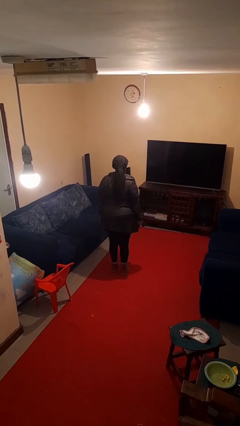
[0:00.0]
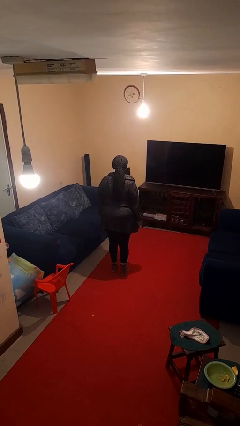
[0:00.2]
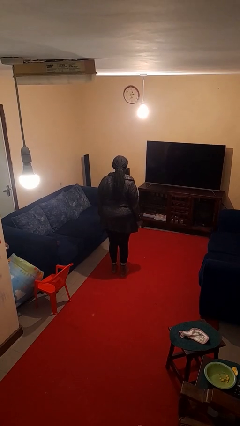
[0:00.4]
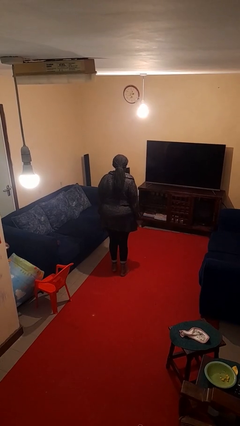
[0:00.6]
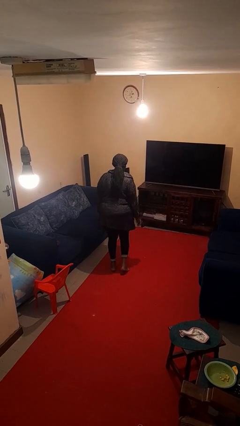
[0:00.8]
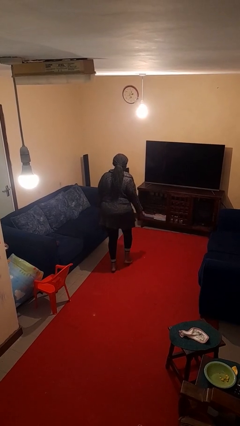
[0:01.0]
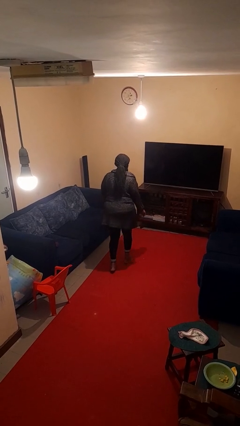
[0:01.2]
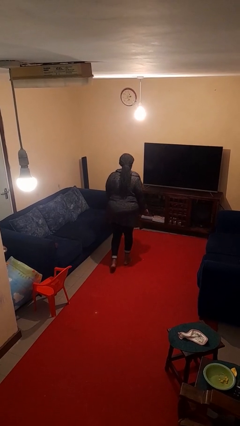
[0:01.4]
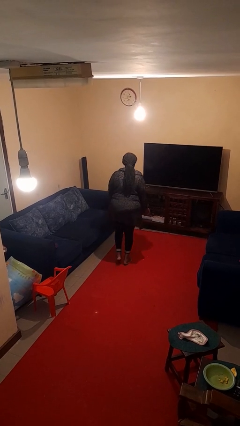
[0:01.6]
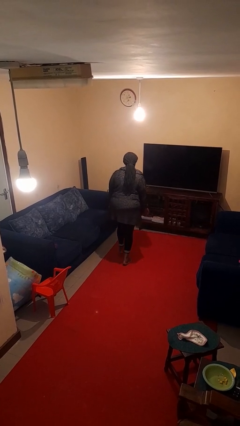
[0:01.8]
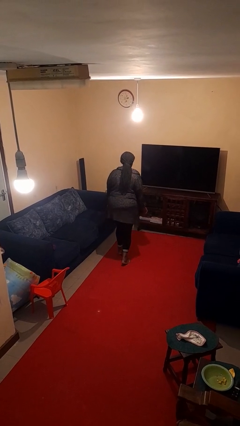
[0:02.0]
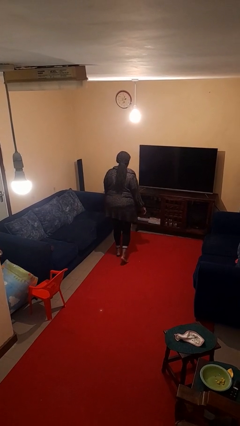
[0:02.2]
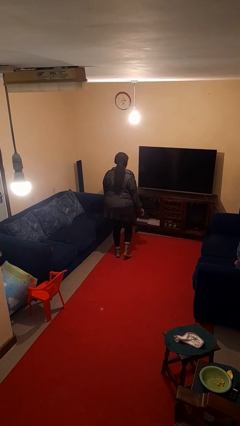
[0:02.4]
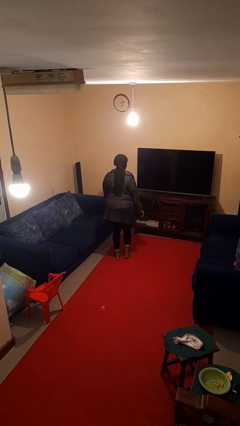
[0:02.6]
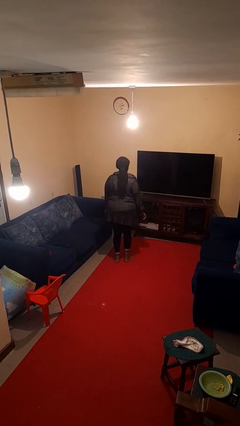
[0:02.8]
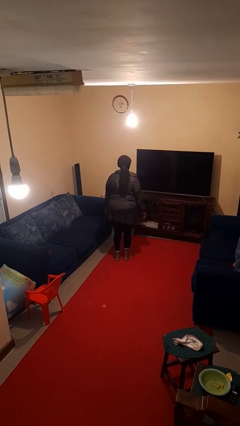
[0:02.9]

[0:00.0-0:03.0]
person walks tiptoe

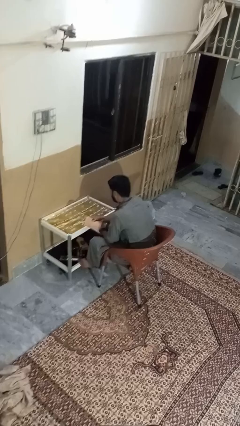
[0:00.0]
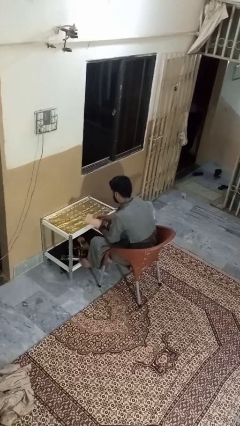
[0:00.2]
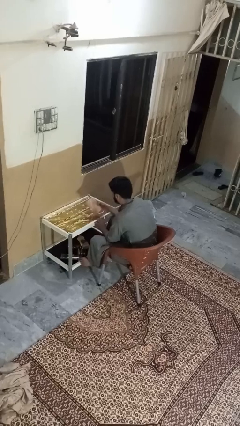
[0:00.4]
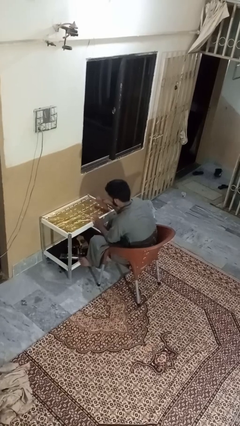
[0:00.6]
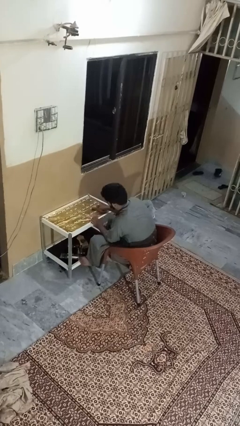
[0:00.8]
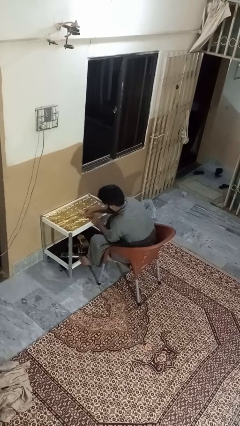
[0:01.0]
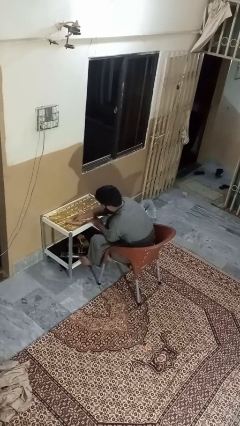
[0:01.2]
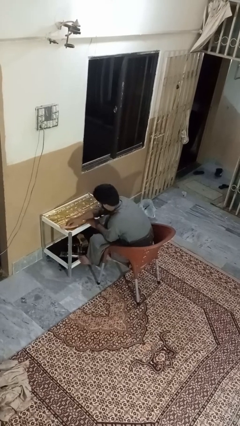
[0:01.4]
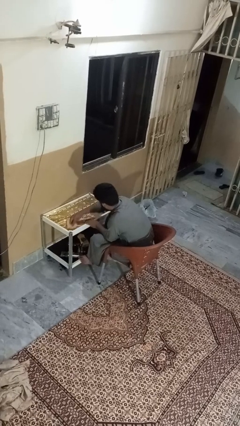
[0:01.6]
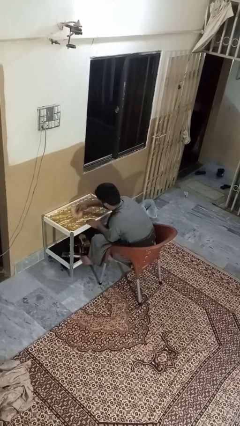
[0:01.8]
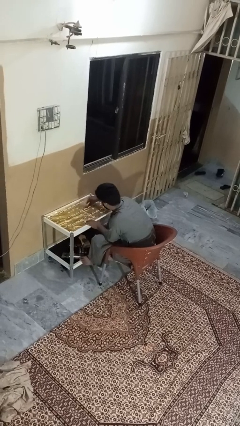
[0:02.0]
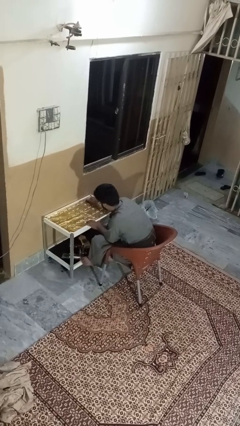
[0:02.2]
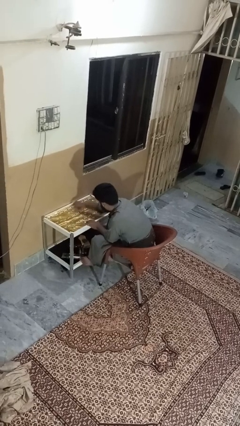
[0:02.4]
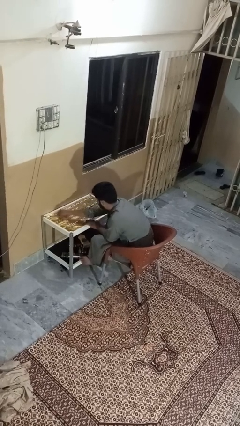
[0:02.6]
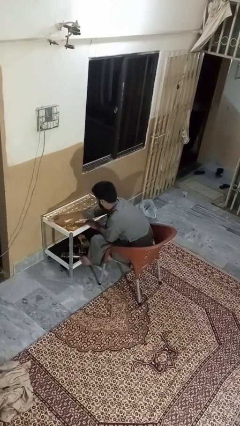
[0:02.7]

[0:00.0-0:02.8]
person cleans table with rag

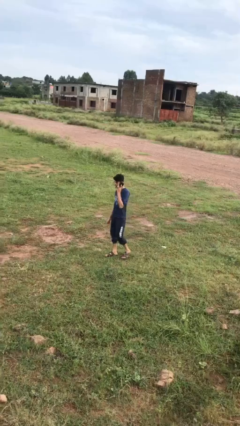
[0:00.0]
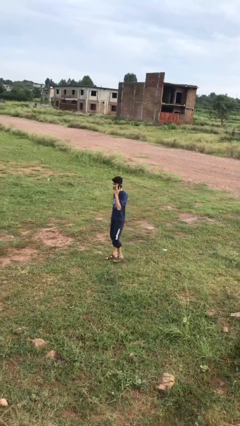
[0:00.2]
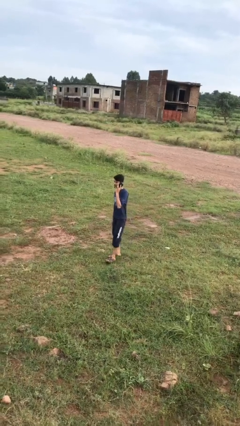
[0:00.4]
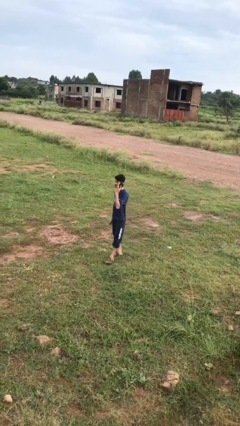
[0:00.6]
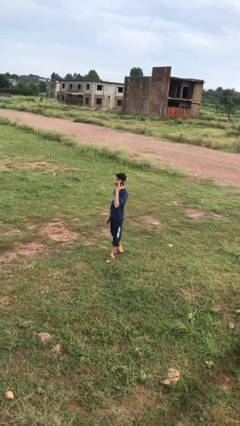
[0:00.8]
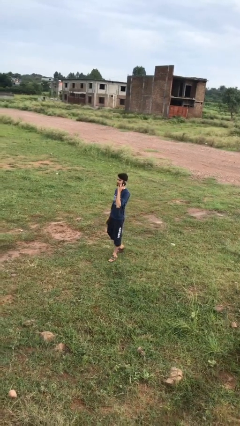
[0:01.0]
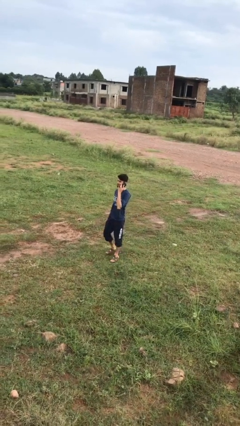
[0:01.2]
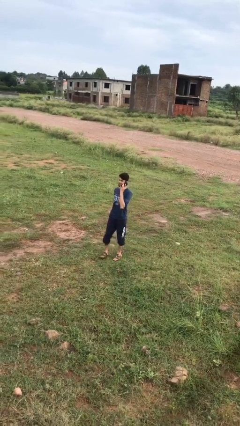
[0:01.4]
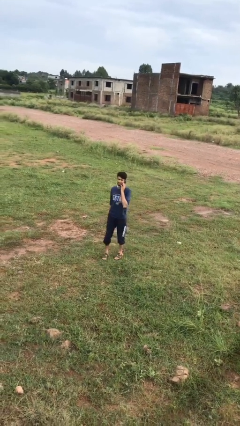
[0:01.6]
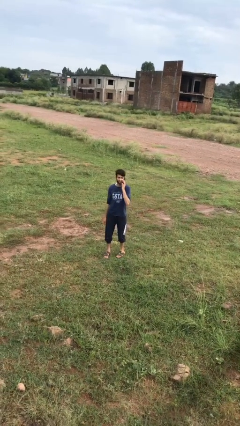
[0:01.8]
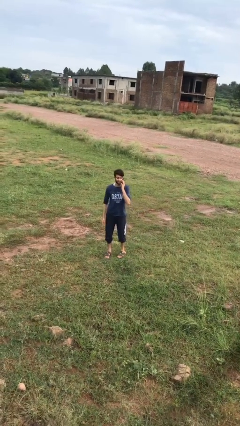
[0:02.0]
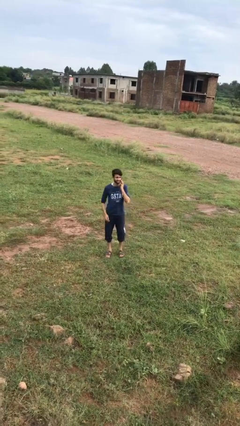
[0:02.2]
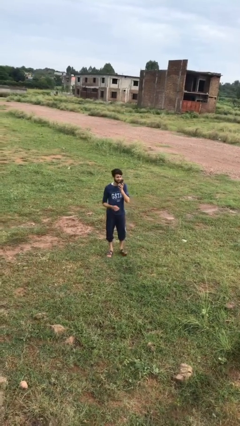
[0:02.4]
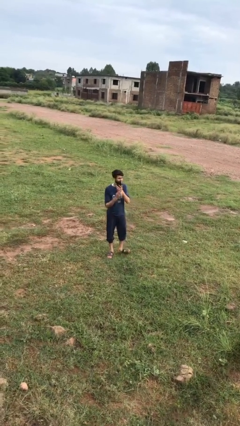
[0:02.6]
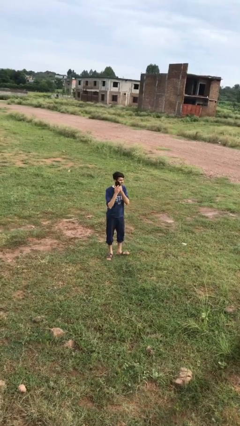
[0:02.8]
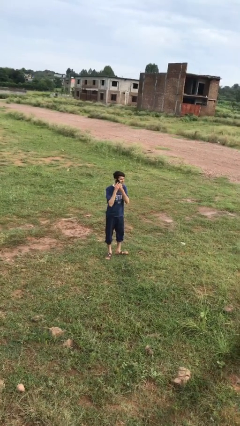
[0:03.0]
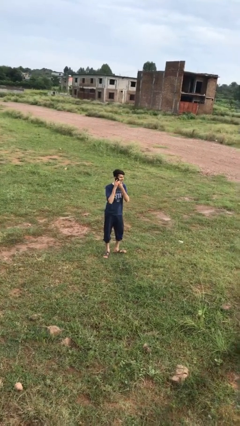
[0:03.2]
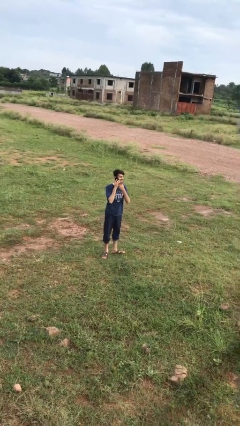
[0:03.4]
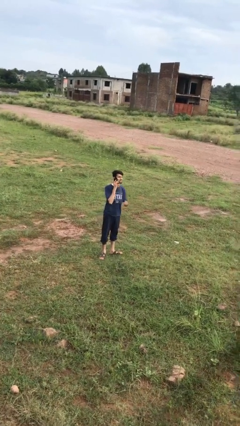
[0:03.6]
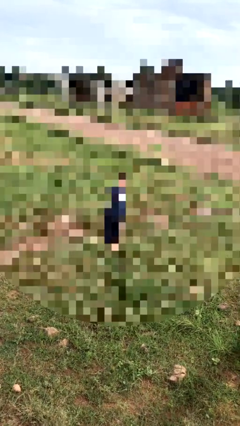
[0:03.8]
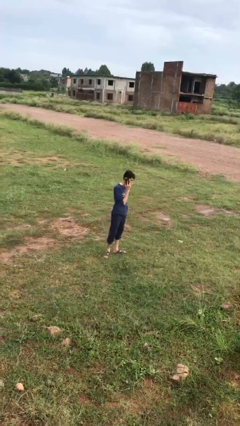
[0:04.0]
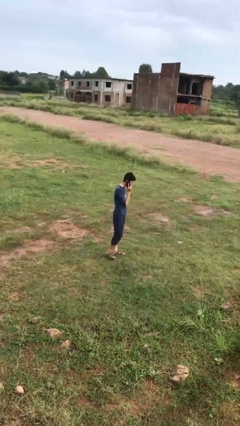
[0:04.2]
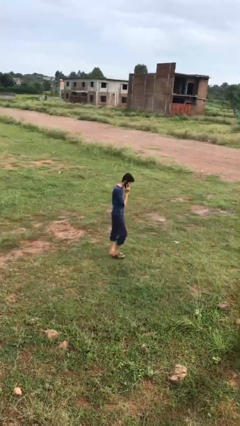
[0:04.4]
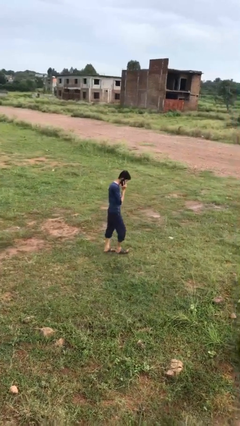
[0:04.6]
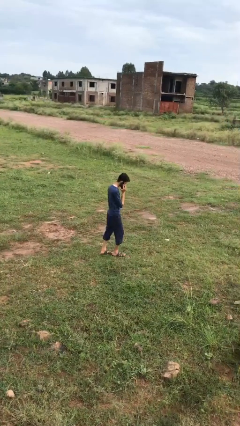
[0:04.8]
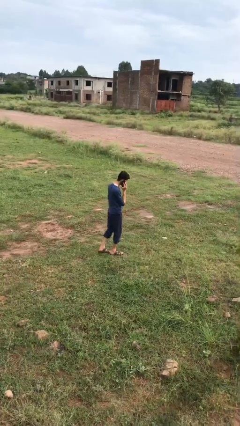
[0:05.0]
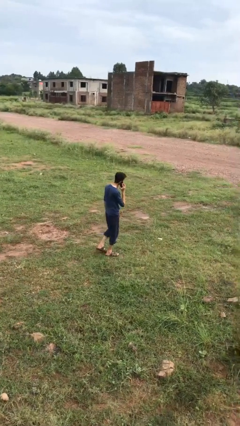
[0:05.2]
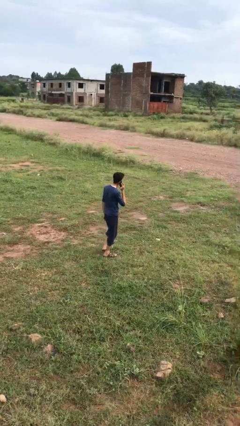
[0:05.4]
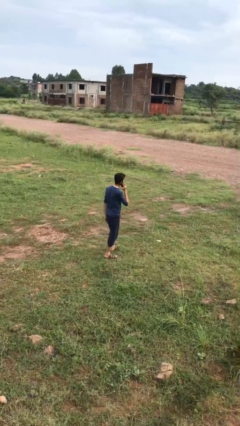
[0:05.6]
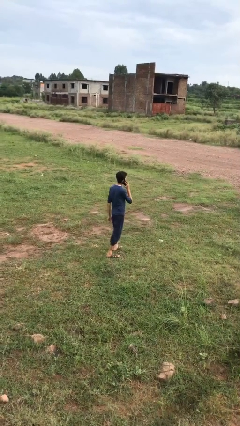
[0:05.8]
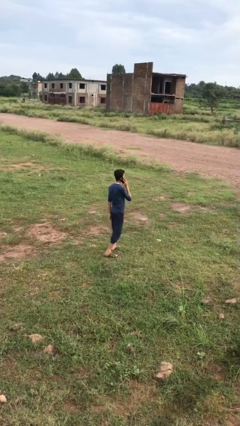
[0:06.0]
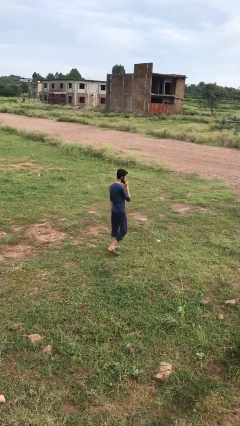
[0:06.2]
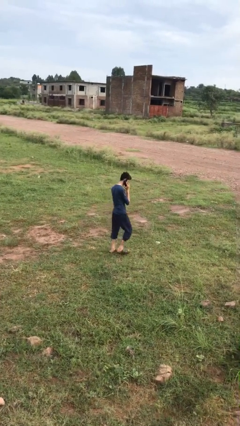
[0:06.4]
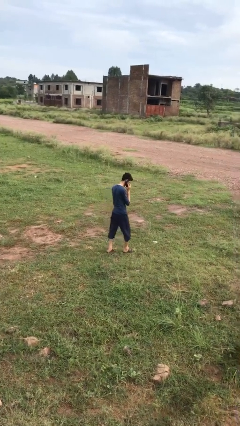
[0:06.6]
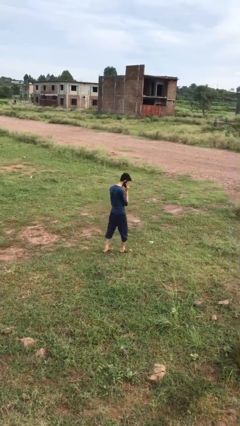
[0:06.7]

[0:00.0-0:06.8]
person talks on phone

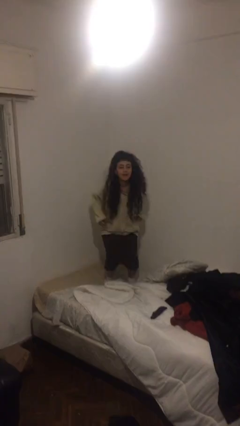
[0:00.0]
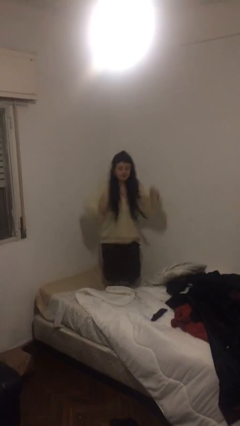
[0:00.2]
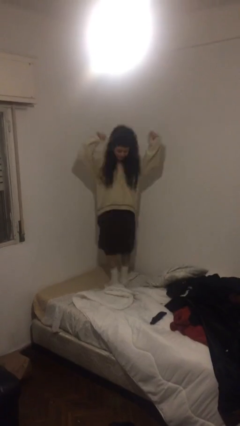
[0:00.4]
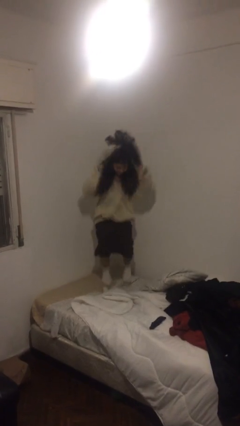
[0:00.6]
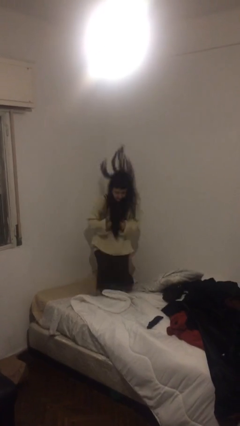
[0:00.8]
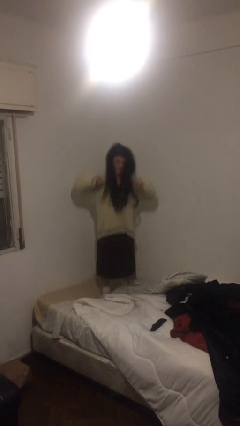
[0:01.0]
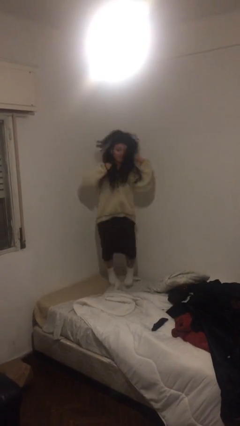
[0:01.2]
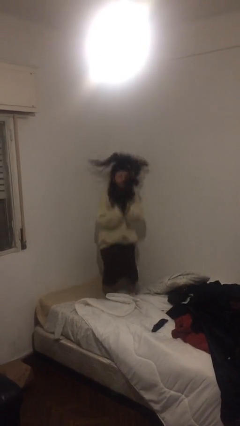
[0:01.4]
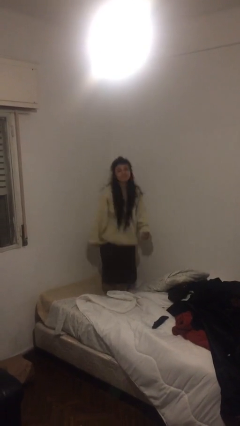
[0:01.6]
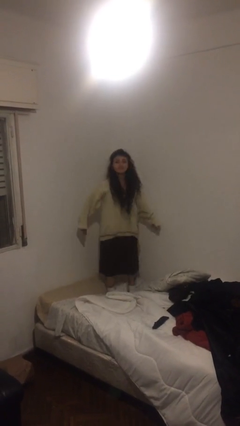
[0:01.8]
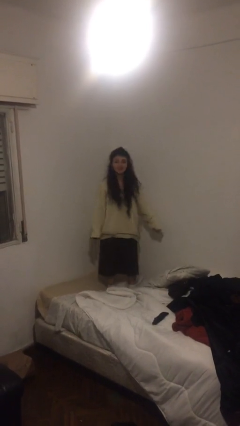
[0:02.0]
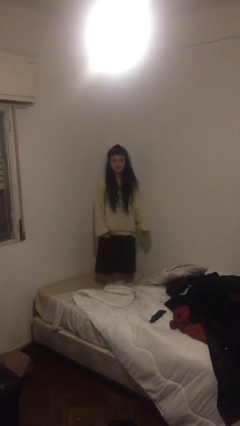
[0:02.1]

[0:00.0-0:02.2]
person jumps on bed

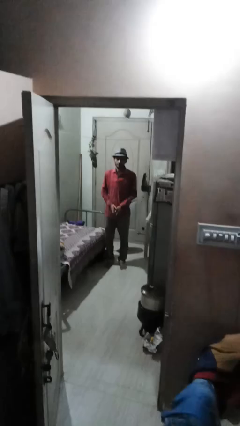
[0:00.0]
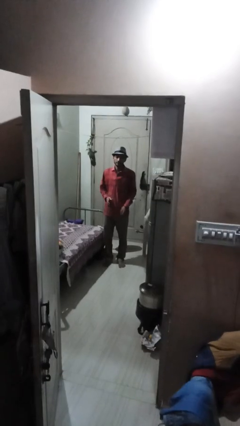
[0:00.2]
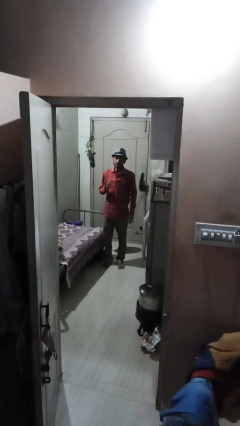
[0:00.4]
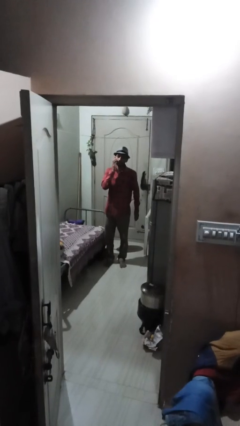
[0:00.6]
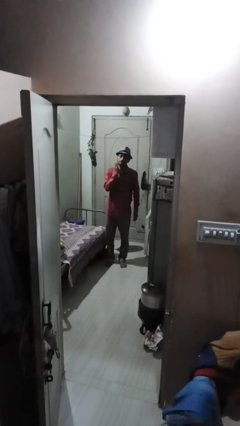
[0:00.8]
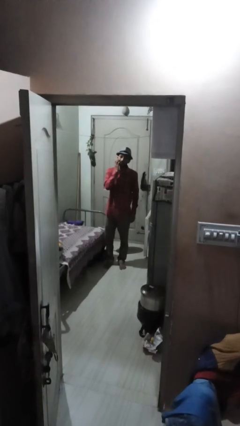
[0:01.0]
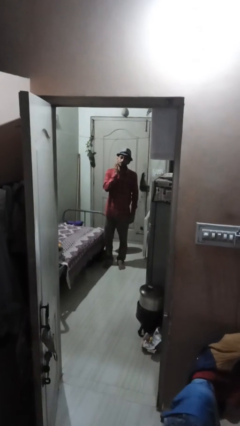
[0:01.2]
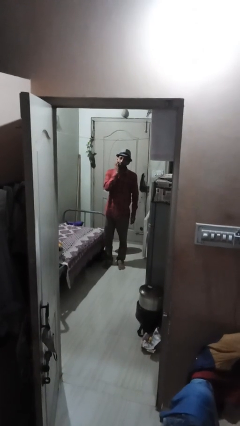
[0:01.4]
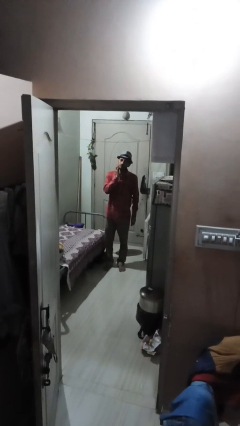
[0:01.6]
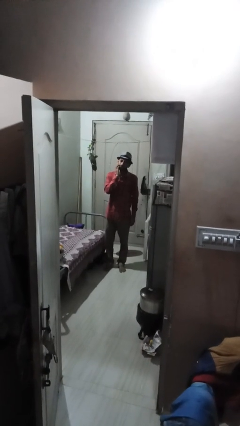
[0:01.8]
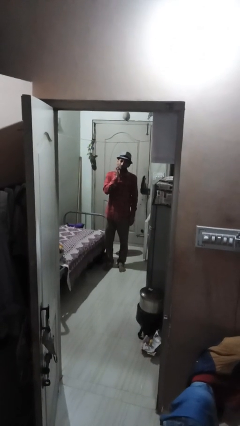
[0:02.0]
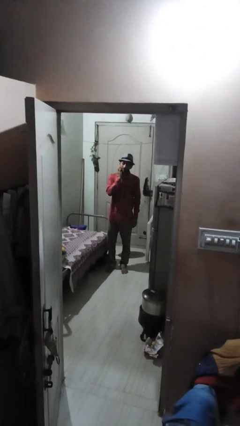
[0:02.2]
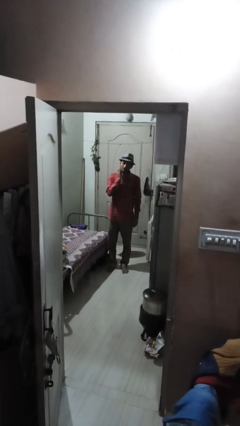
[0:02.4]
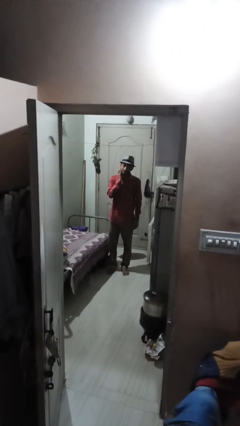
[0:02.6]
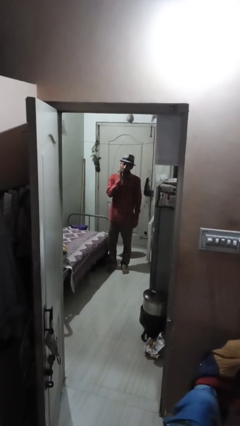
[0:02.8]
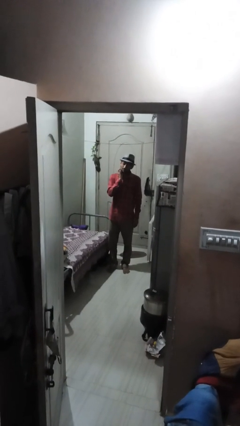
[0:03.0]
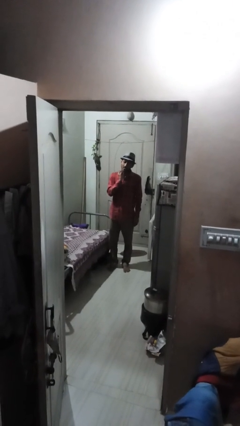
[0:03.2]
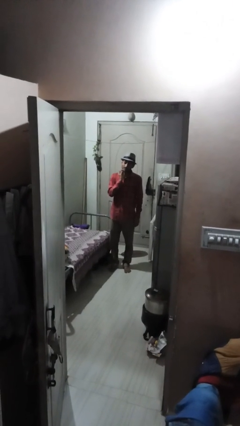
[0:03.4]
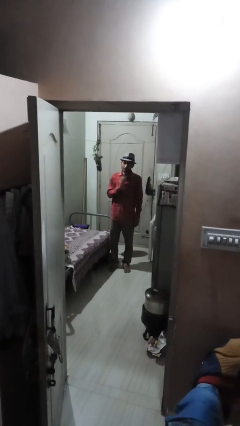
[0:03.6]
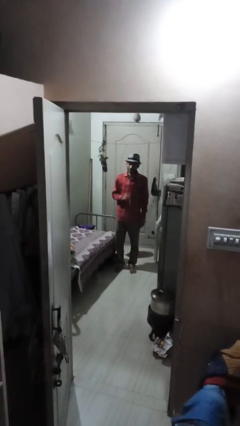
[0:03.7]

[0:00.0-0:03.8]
person scratches face
